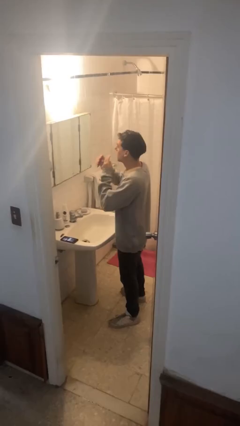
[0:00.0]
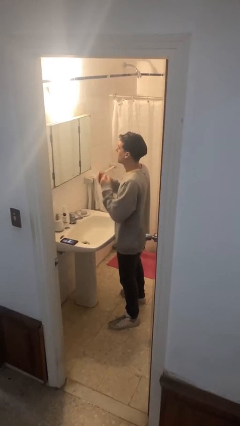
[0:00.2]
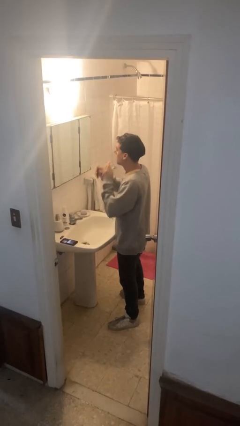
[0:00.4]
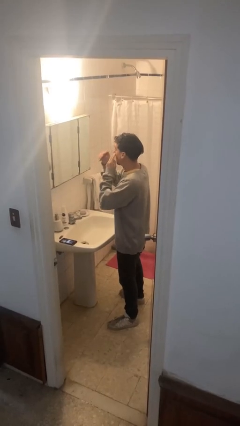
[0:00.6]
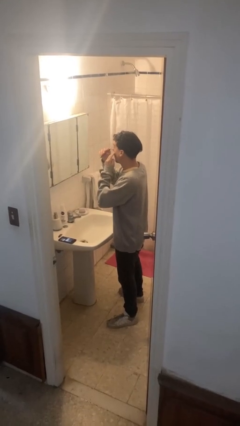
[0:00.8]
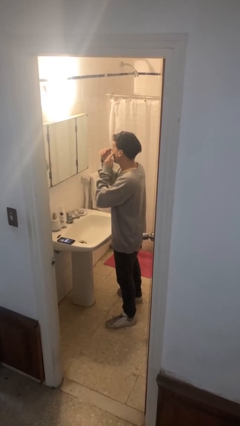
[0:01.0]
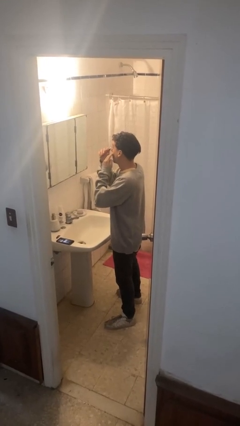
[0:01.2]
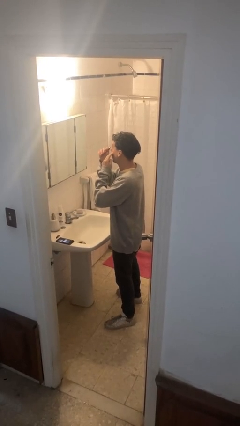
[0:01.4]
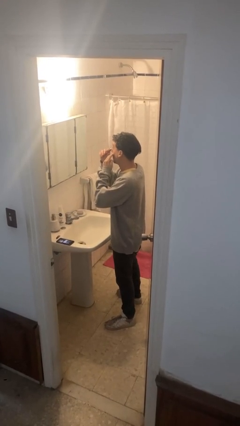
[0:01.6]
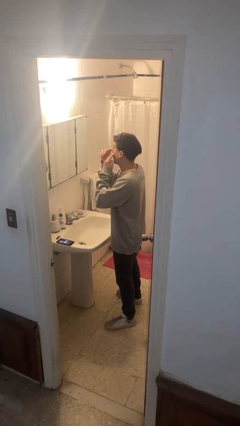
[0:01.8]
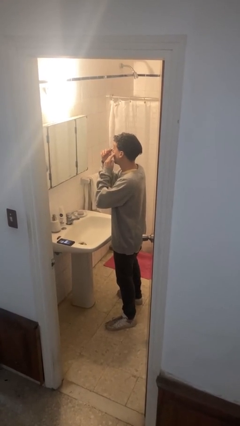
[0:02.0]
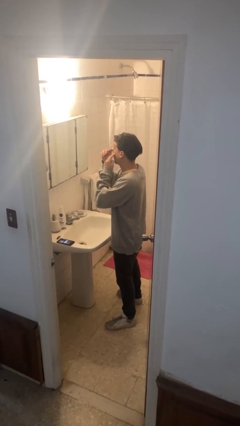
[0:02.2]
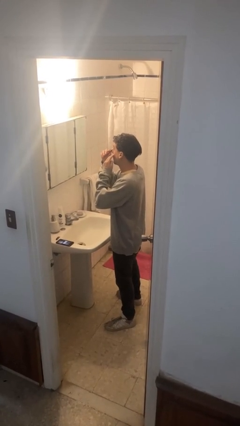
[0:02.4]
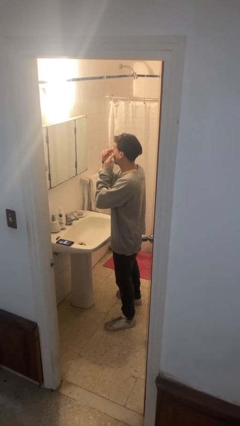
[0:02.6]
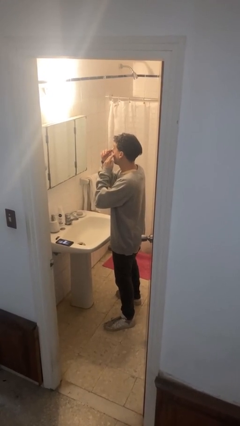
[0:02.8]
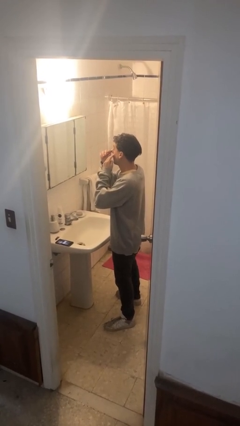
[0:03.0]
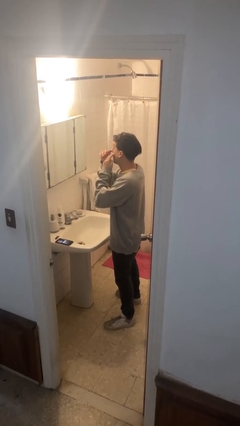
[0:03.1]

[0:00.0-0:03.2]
person applies eye makeup

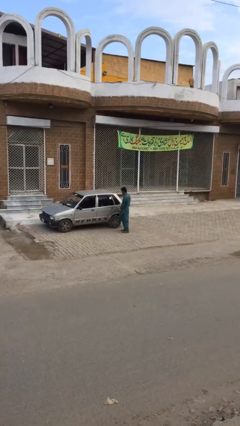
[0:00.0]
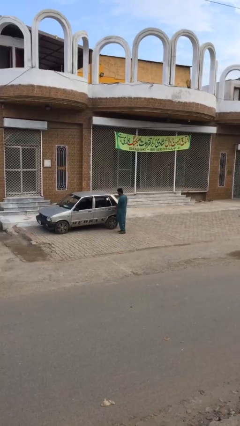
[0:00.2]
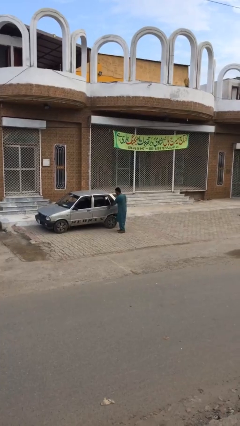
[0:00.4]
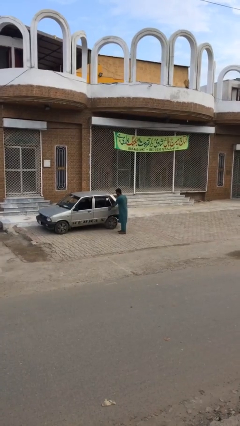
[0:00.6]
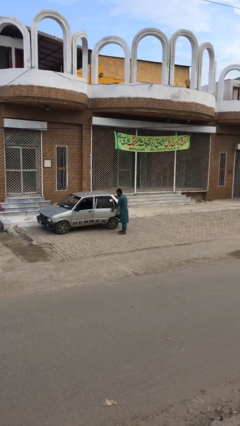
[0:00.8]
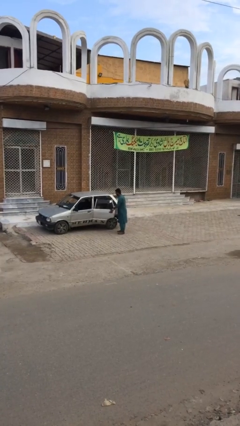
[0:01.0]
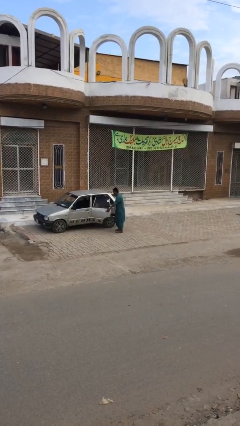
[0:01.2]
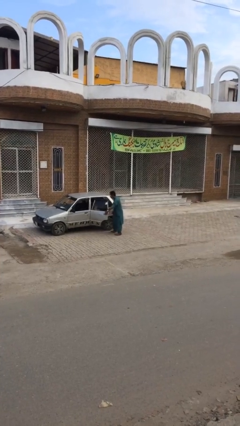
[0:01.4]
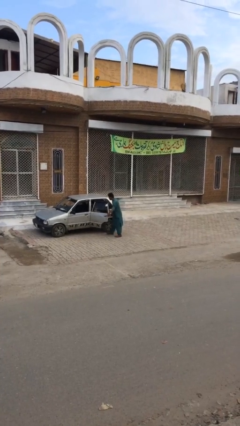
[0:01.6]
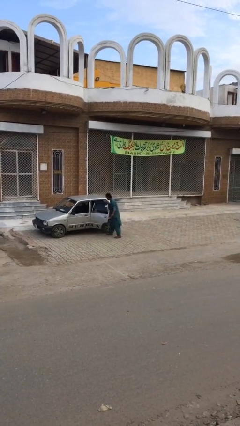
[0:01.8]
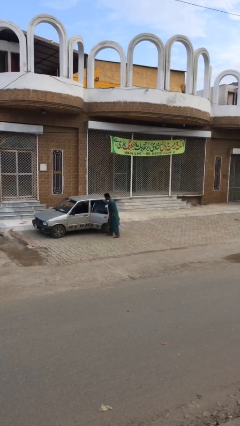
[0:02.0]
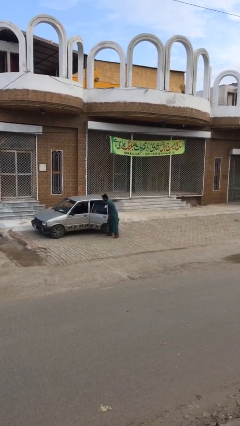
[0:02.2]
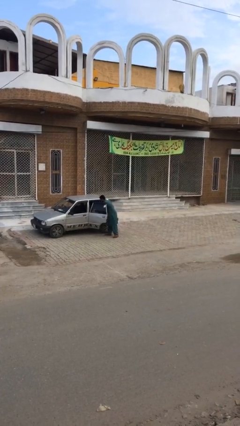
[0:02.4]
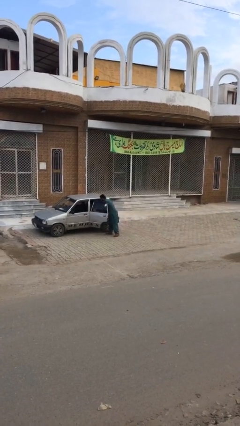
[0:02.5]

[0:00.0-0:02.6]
person opens car door

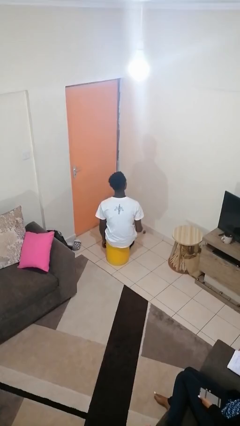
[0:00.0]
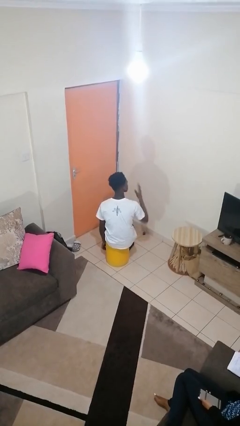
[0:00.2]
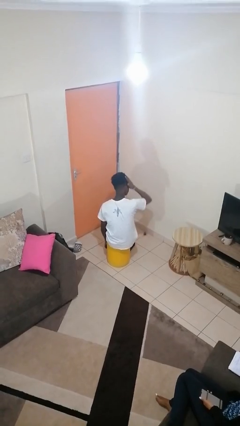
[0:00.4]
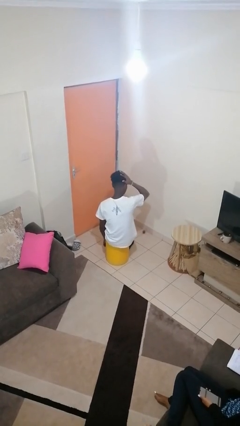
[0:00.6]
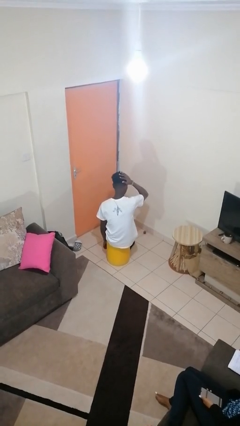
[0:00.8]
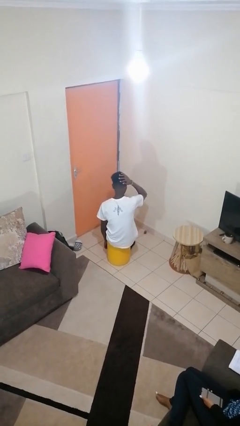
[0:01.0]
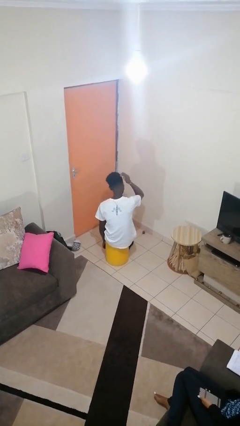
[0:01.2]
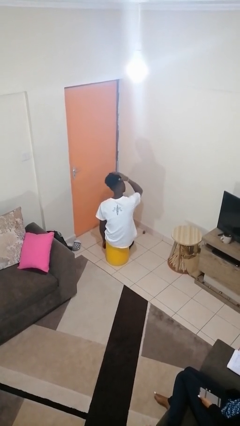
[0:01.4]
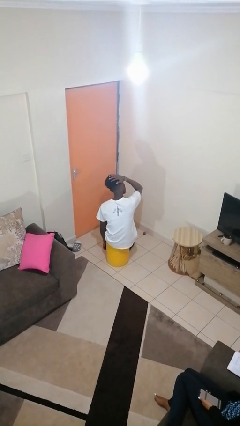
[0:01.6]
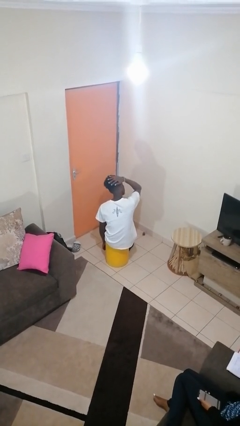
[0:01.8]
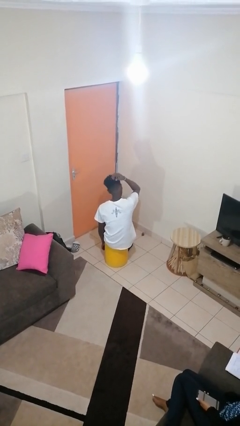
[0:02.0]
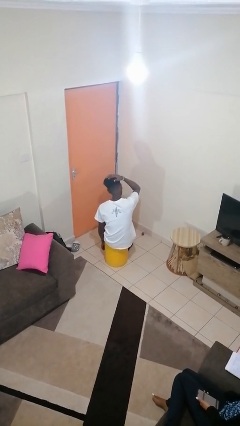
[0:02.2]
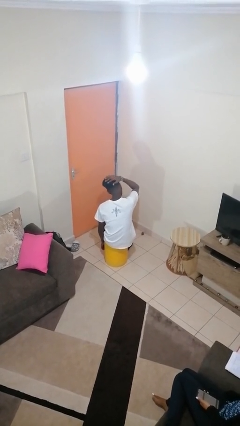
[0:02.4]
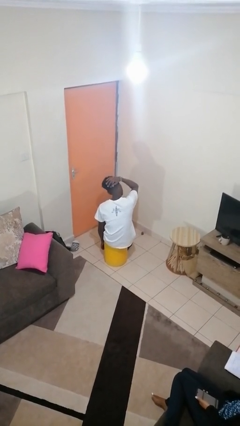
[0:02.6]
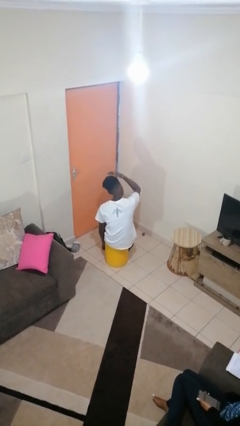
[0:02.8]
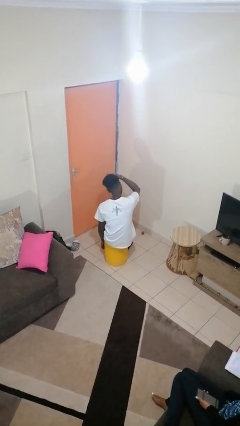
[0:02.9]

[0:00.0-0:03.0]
person strokes hair

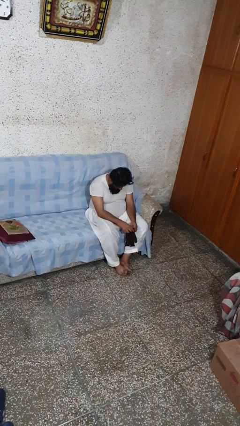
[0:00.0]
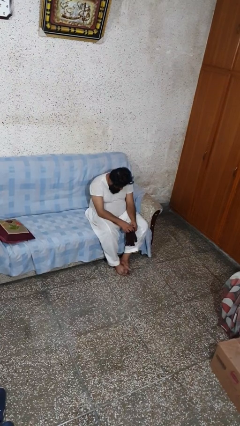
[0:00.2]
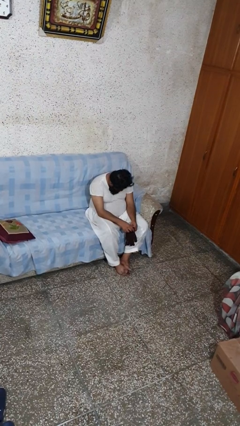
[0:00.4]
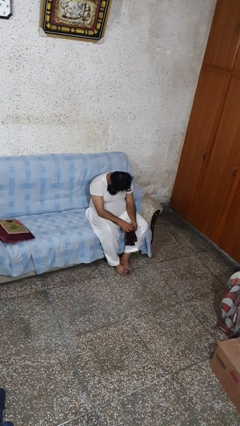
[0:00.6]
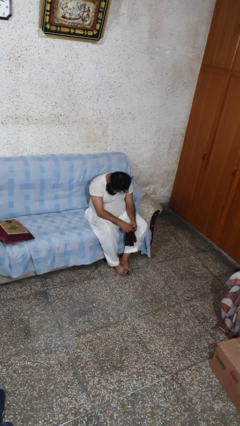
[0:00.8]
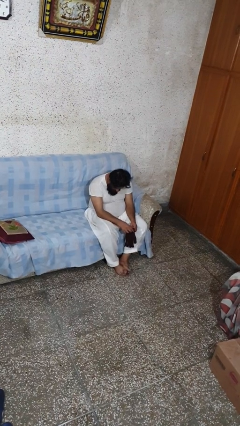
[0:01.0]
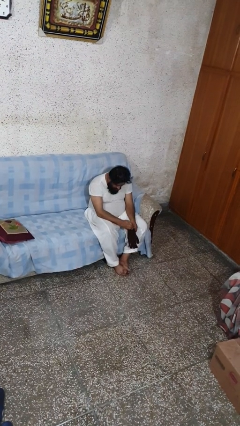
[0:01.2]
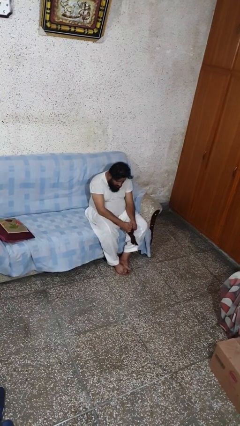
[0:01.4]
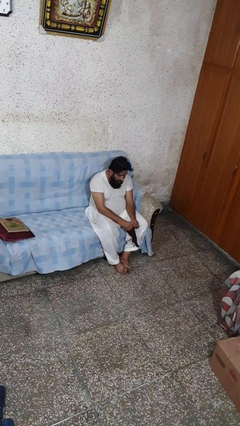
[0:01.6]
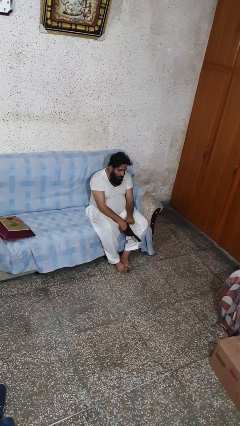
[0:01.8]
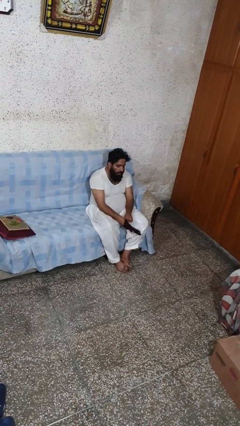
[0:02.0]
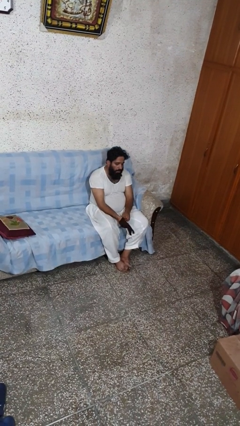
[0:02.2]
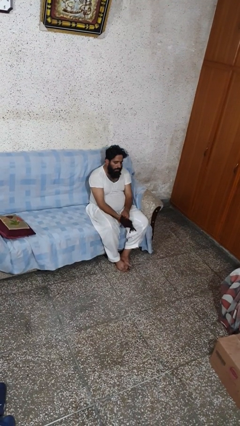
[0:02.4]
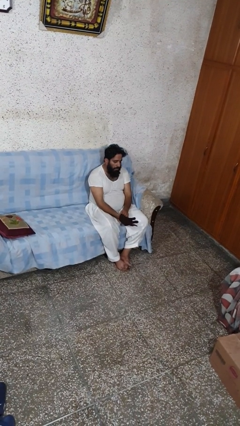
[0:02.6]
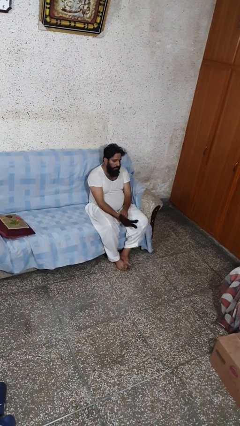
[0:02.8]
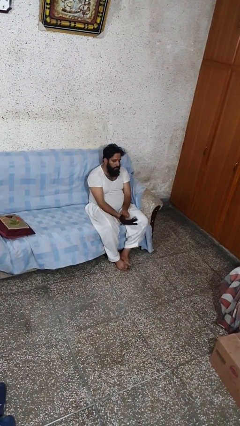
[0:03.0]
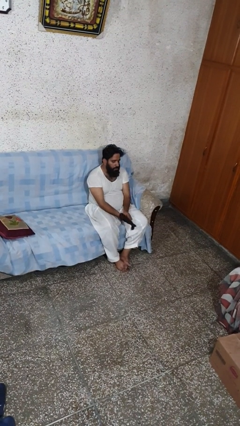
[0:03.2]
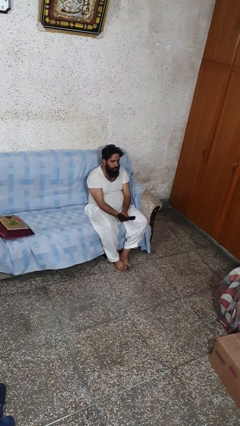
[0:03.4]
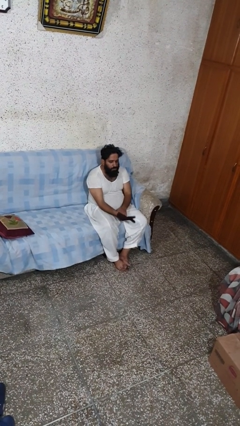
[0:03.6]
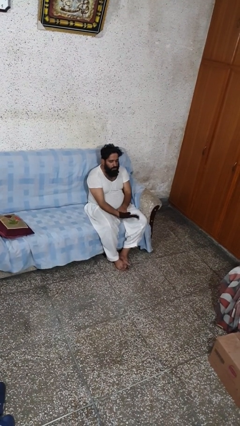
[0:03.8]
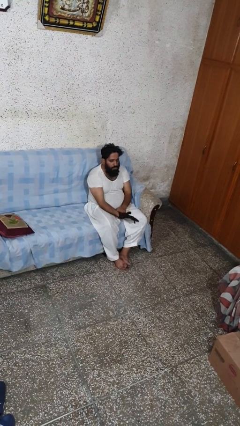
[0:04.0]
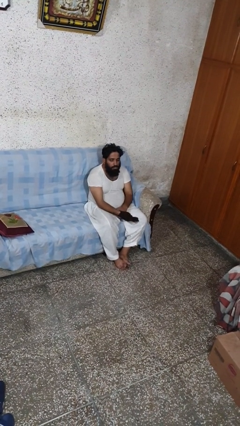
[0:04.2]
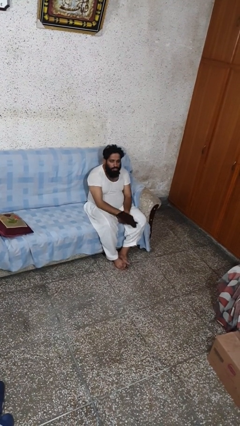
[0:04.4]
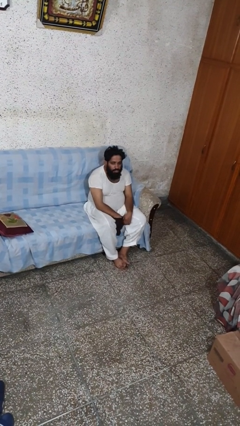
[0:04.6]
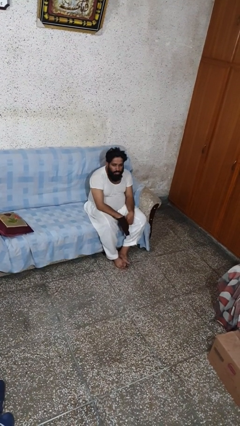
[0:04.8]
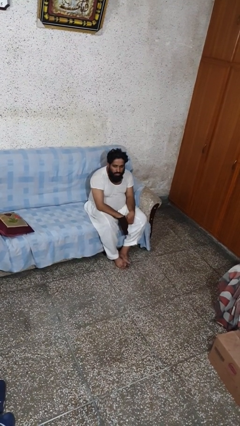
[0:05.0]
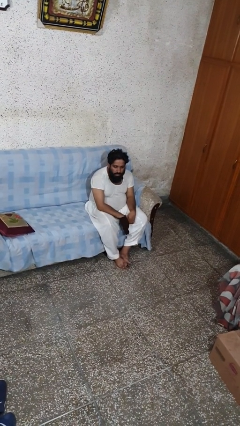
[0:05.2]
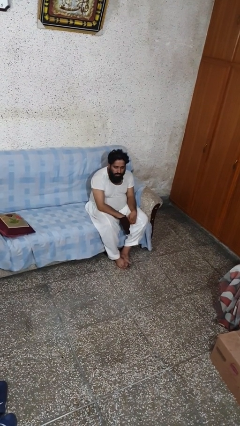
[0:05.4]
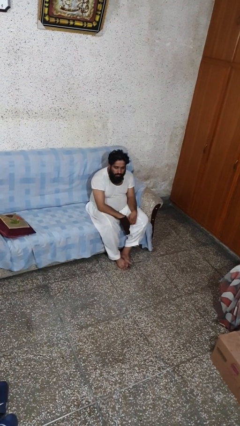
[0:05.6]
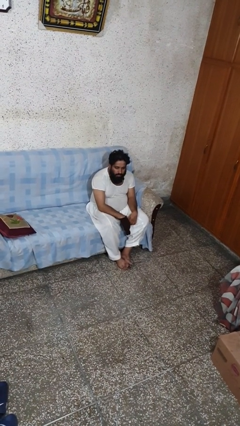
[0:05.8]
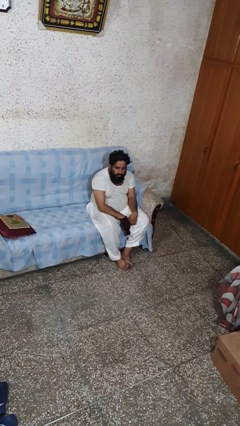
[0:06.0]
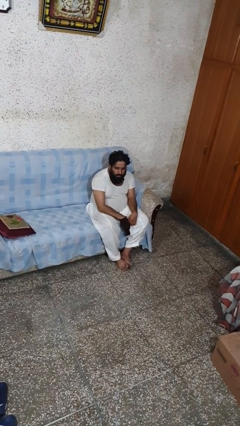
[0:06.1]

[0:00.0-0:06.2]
person puts on gloves

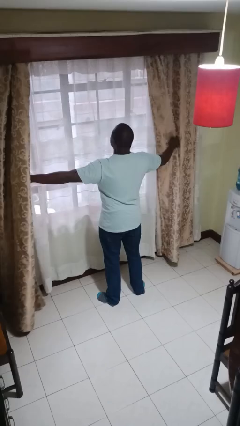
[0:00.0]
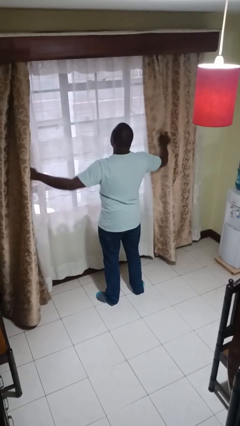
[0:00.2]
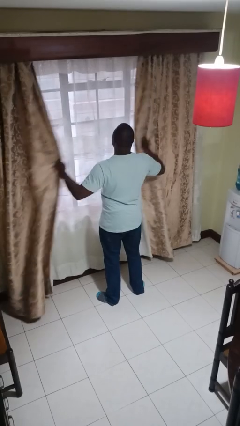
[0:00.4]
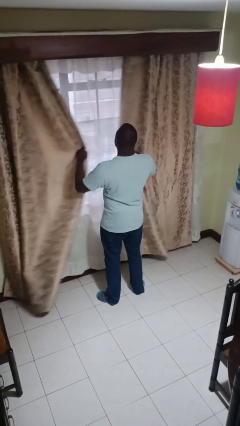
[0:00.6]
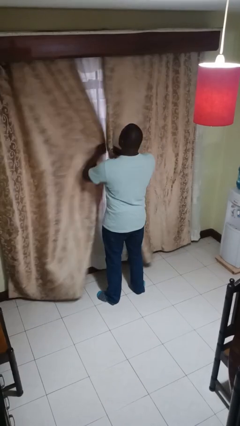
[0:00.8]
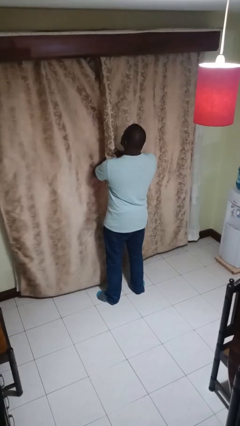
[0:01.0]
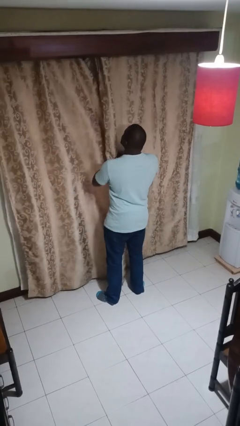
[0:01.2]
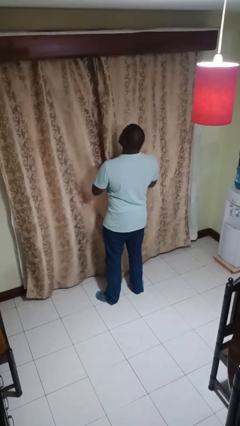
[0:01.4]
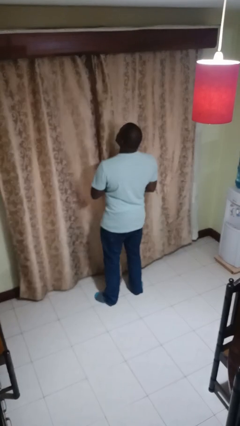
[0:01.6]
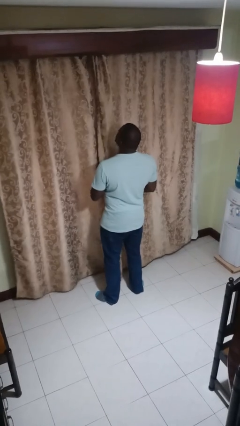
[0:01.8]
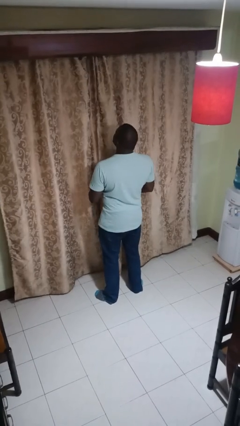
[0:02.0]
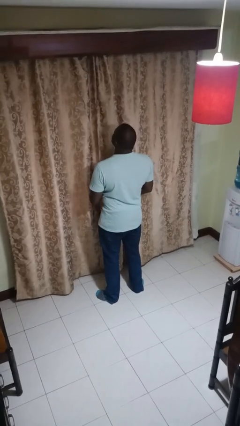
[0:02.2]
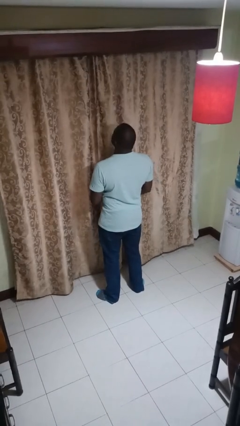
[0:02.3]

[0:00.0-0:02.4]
person closes curtains

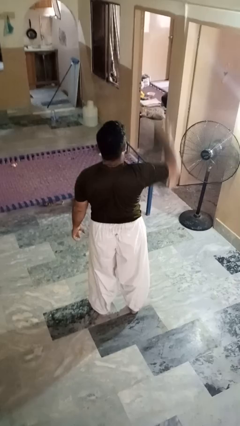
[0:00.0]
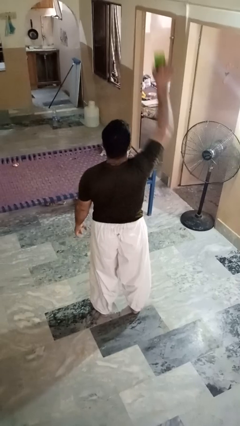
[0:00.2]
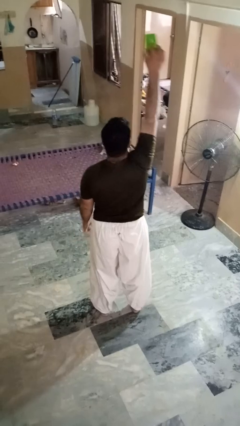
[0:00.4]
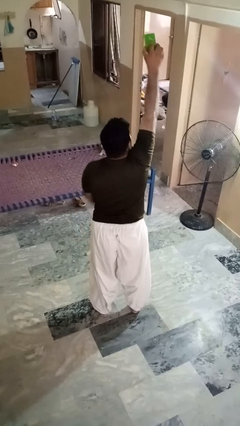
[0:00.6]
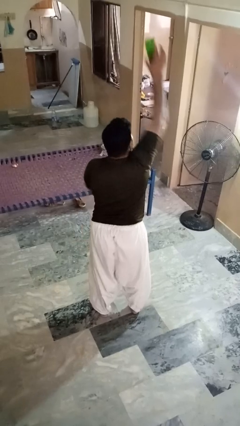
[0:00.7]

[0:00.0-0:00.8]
person drops object
